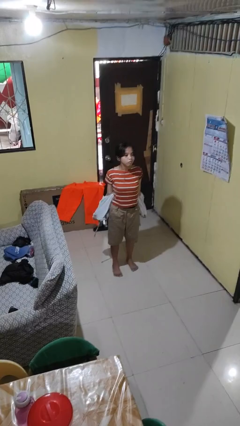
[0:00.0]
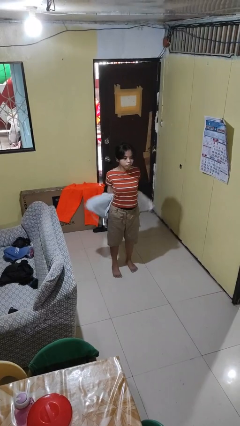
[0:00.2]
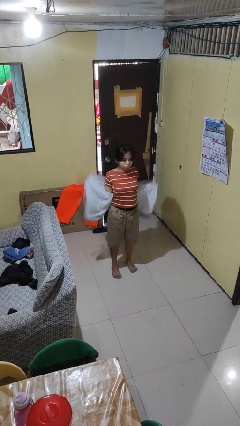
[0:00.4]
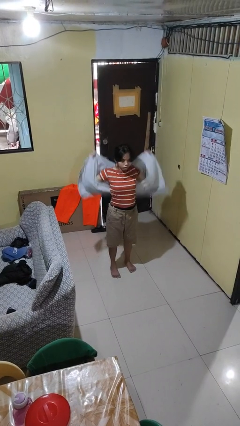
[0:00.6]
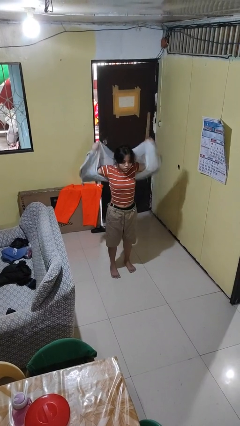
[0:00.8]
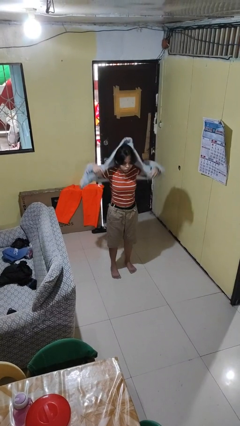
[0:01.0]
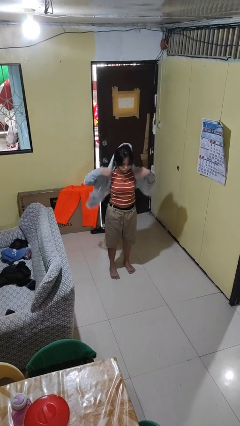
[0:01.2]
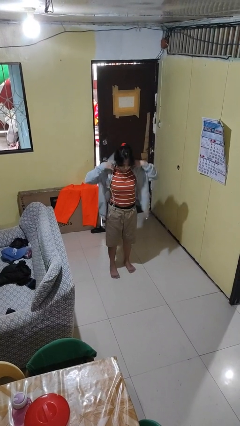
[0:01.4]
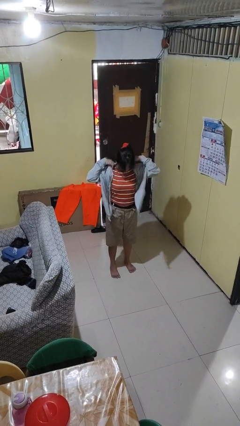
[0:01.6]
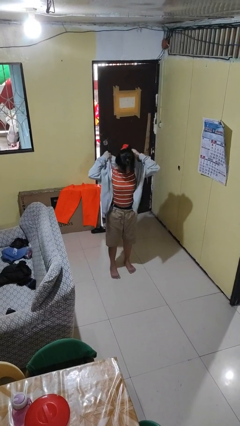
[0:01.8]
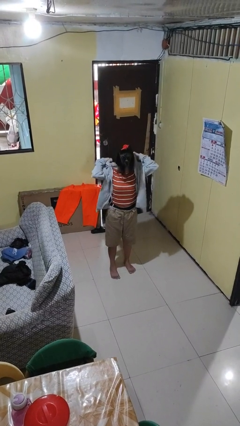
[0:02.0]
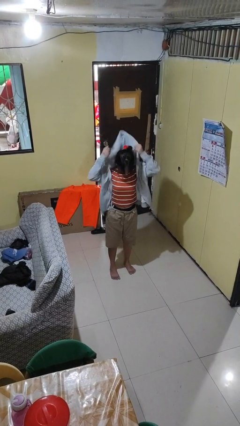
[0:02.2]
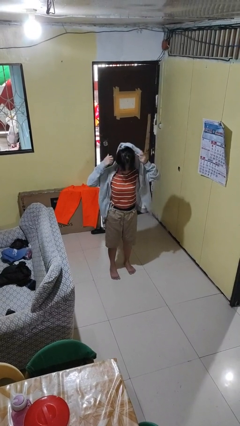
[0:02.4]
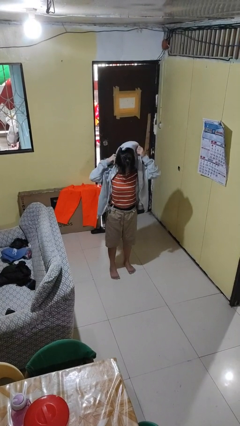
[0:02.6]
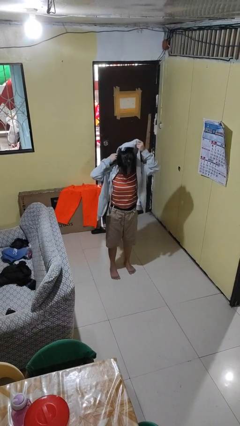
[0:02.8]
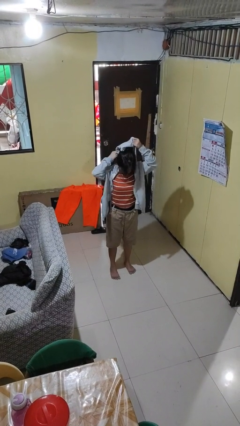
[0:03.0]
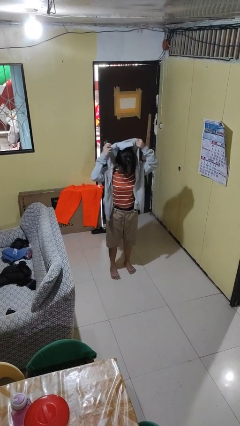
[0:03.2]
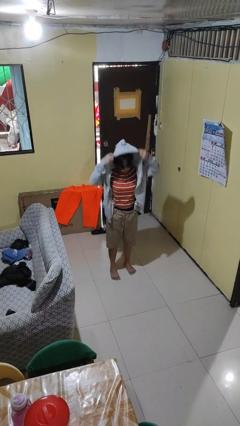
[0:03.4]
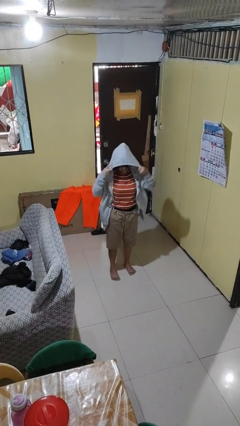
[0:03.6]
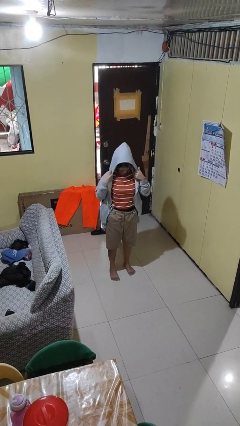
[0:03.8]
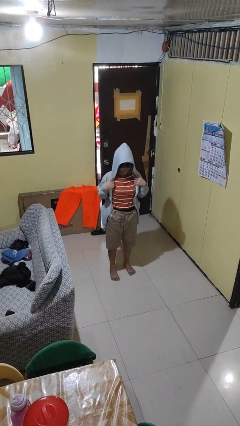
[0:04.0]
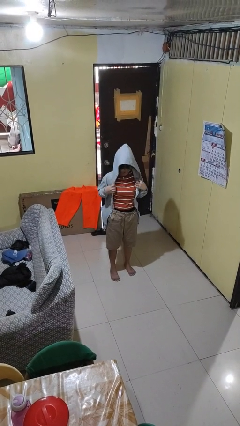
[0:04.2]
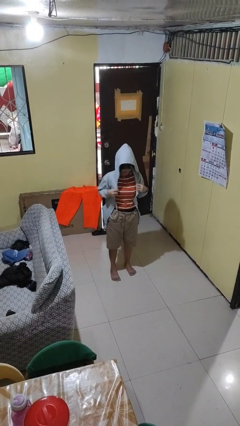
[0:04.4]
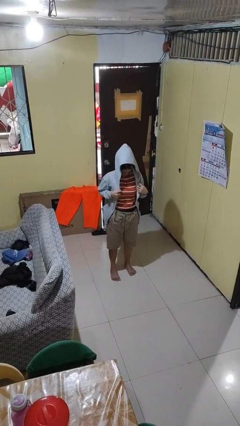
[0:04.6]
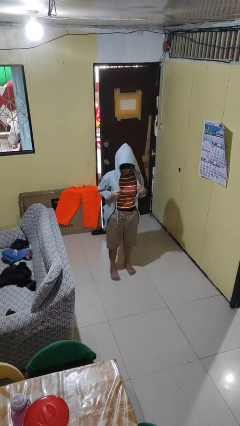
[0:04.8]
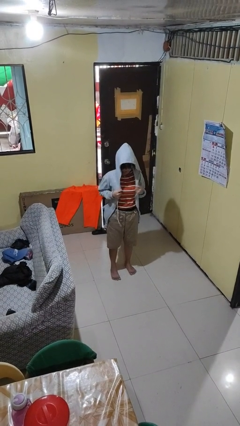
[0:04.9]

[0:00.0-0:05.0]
person puts on hoodie

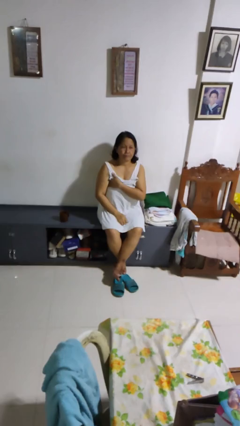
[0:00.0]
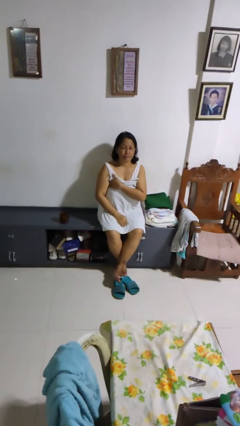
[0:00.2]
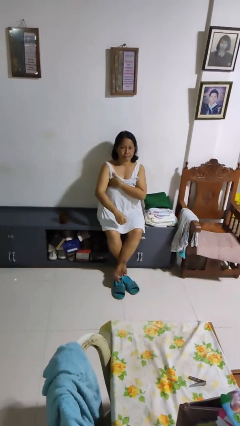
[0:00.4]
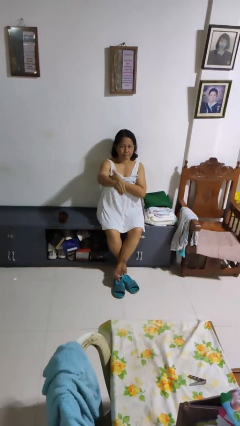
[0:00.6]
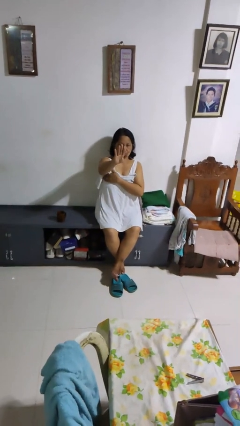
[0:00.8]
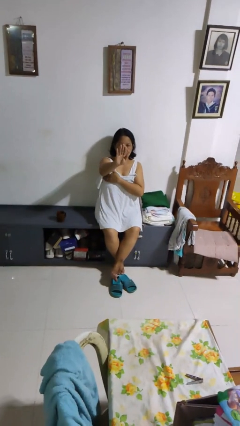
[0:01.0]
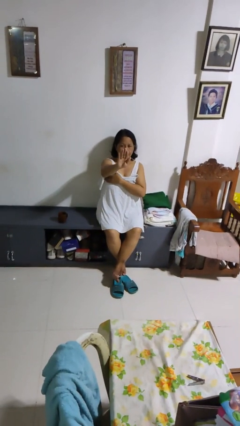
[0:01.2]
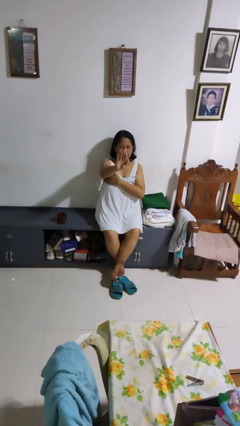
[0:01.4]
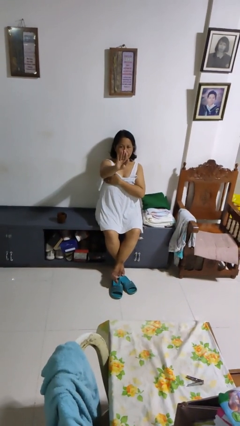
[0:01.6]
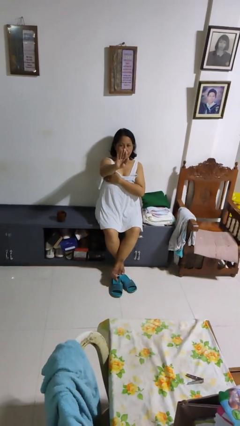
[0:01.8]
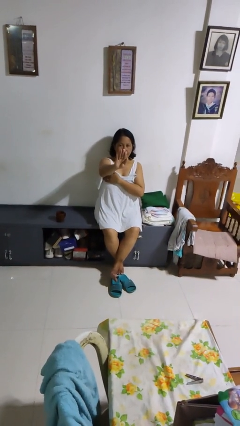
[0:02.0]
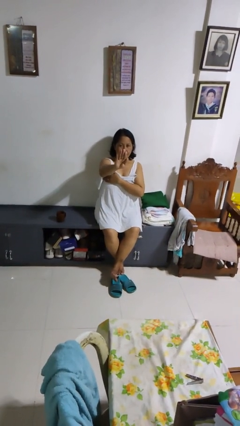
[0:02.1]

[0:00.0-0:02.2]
person gestures stop

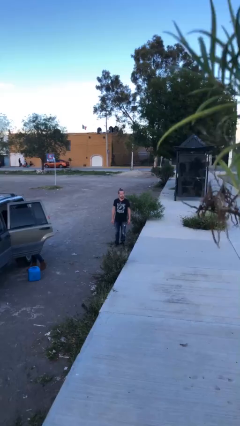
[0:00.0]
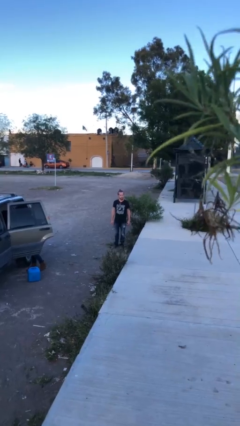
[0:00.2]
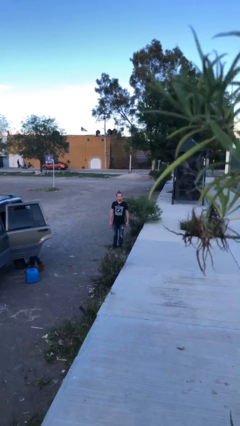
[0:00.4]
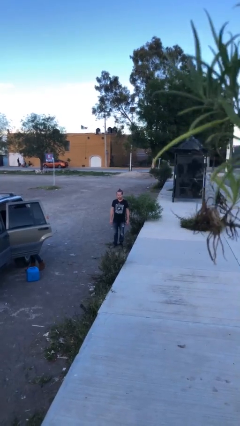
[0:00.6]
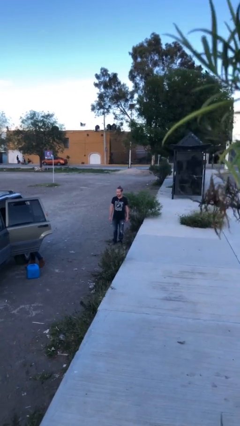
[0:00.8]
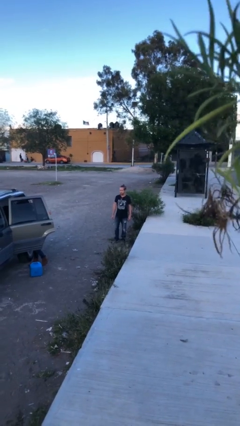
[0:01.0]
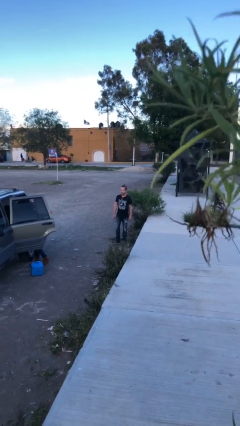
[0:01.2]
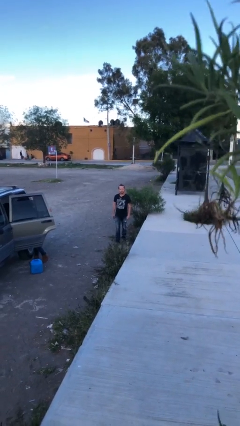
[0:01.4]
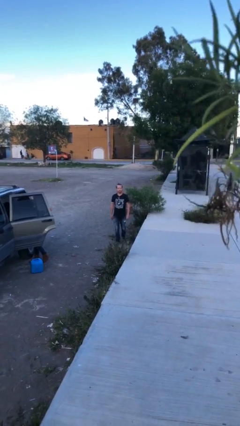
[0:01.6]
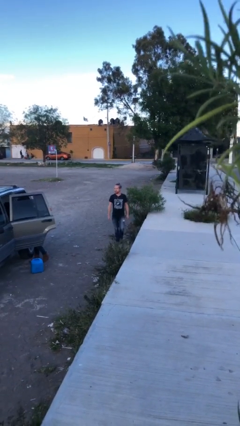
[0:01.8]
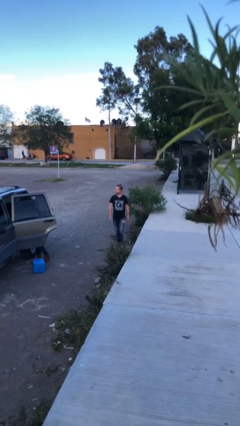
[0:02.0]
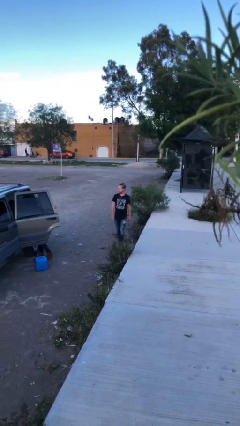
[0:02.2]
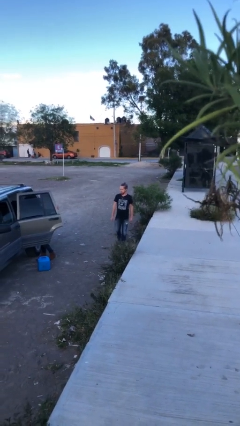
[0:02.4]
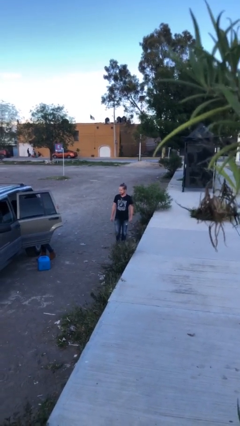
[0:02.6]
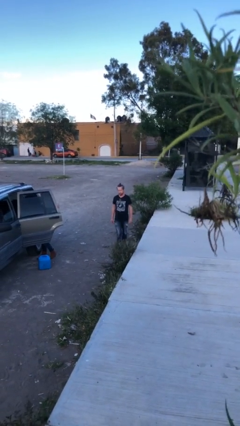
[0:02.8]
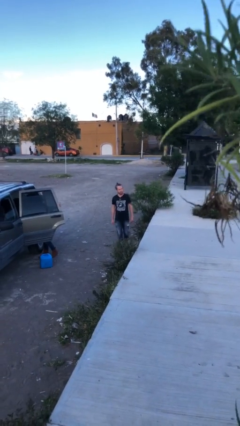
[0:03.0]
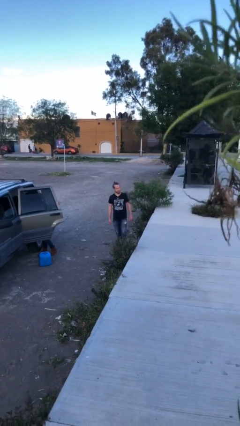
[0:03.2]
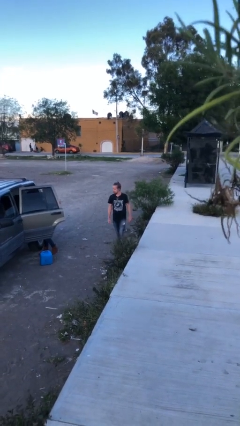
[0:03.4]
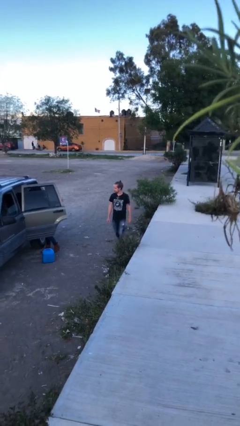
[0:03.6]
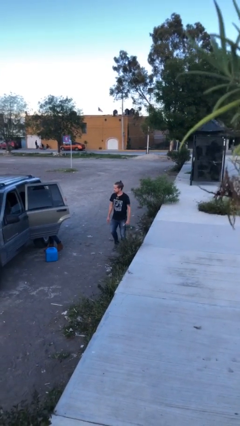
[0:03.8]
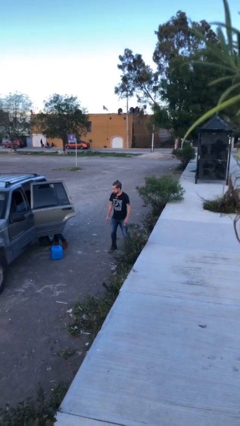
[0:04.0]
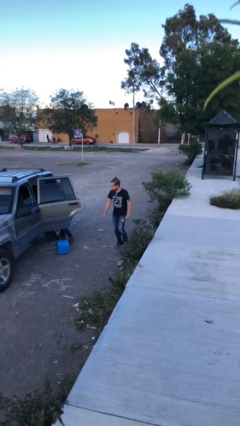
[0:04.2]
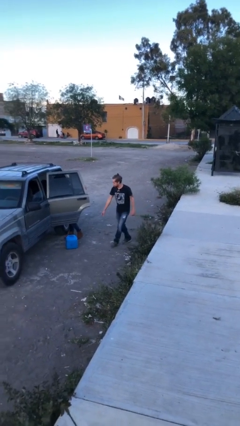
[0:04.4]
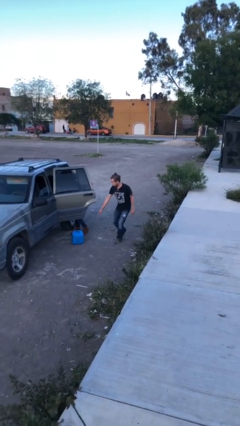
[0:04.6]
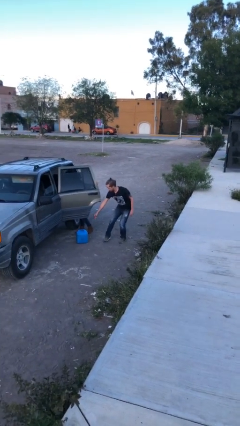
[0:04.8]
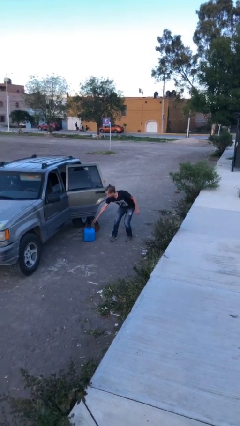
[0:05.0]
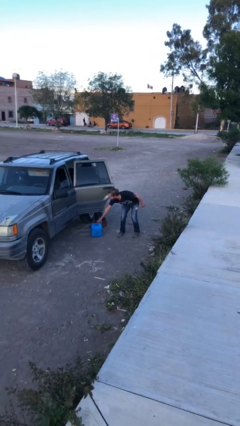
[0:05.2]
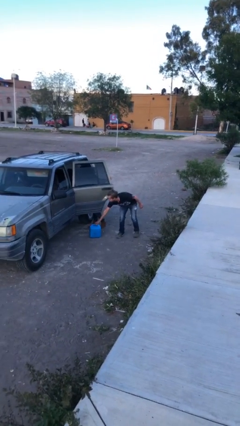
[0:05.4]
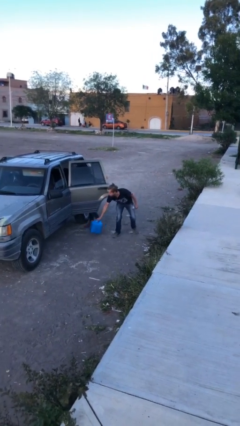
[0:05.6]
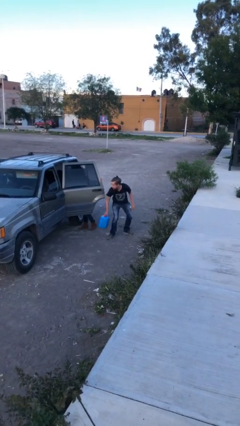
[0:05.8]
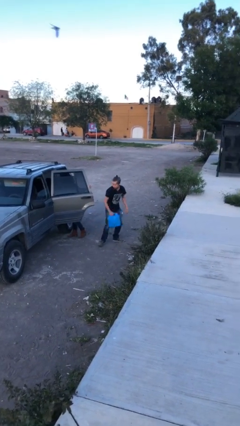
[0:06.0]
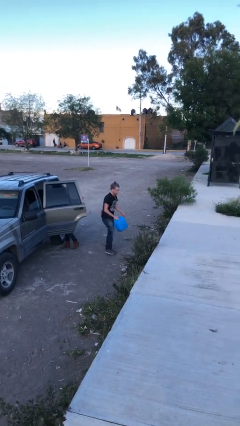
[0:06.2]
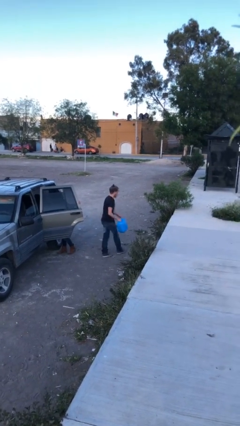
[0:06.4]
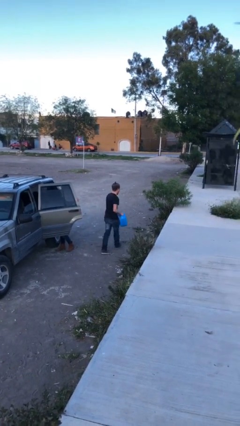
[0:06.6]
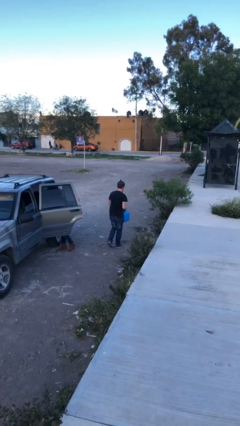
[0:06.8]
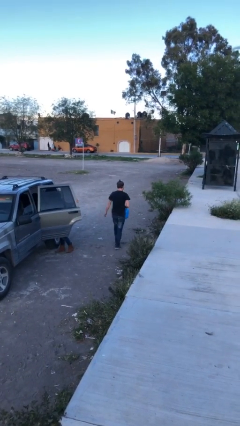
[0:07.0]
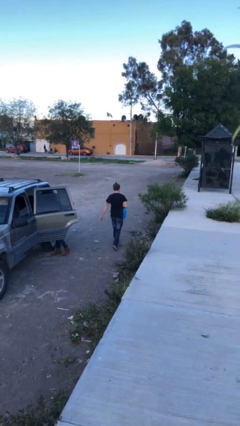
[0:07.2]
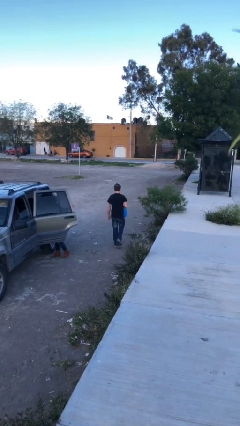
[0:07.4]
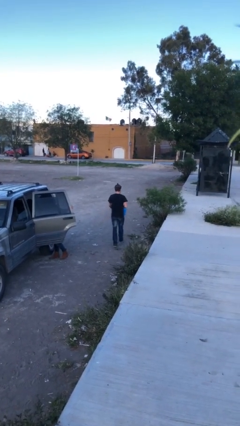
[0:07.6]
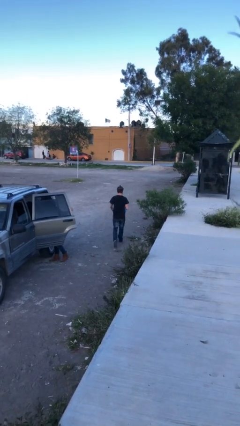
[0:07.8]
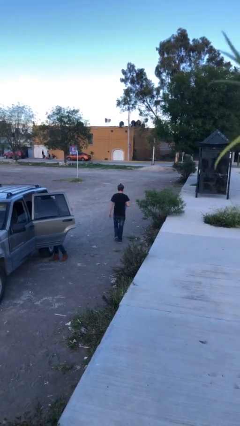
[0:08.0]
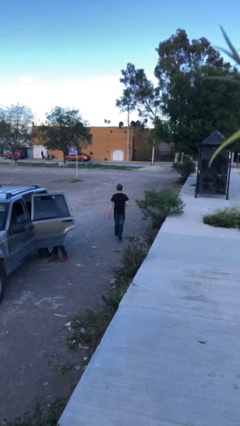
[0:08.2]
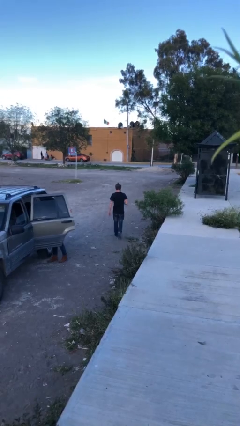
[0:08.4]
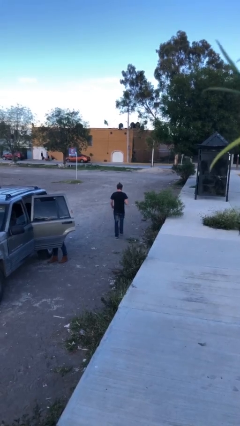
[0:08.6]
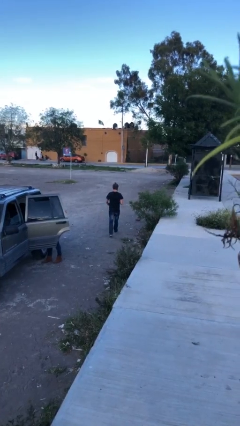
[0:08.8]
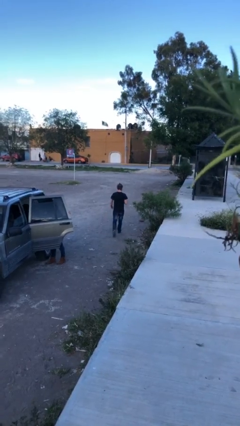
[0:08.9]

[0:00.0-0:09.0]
person steals object from person

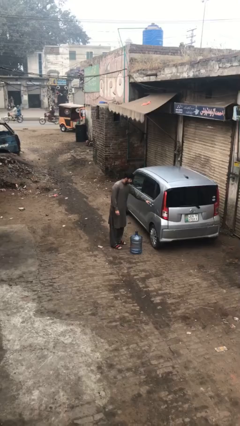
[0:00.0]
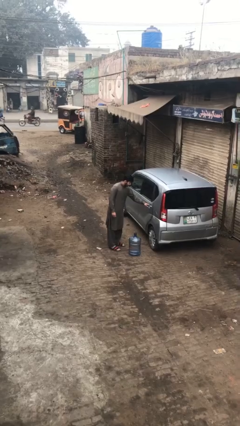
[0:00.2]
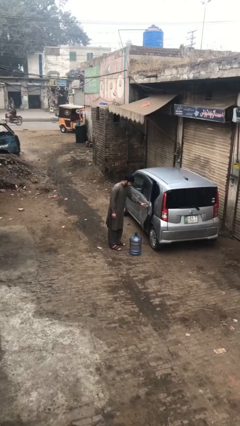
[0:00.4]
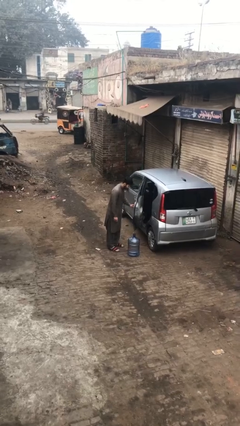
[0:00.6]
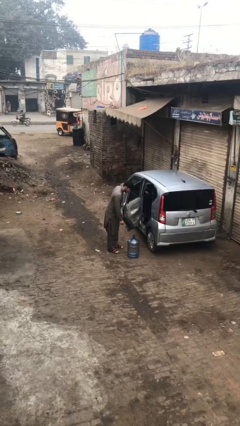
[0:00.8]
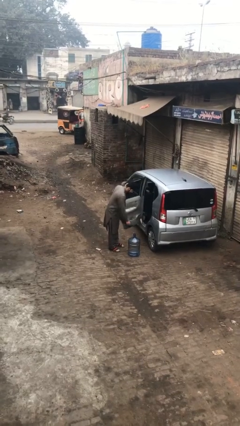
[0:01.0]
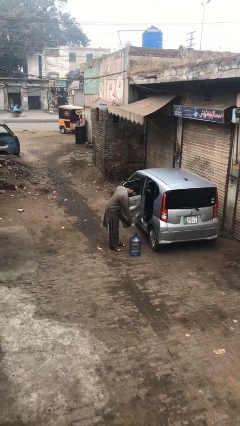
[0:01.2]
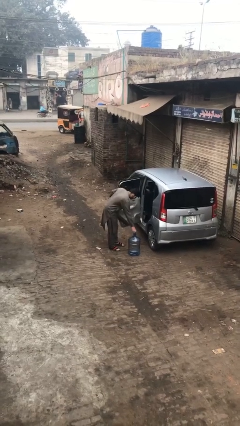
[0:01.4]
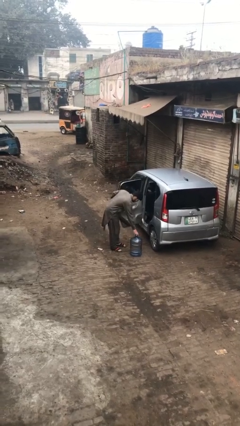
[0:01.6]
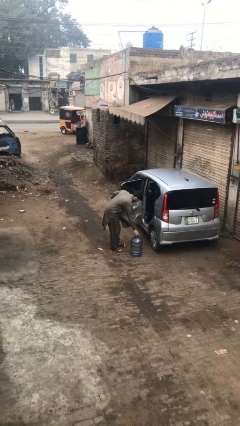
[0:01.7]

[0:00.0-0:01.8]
person opens car door

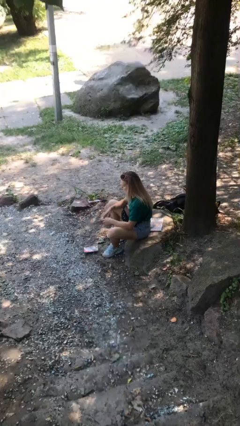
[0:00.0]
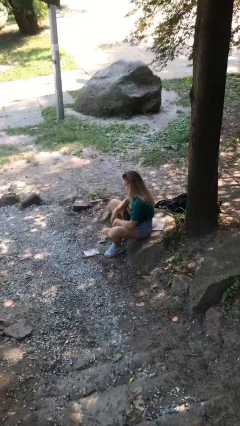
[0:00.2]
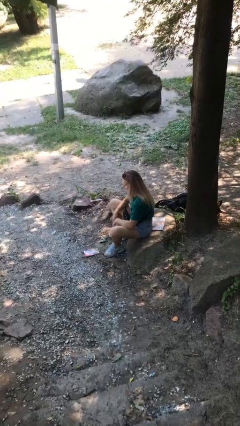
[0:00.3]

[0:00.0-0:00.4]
person drops object
